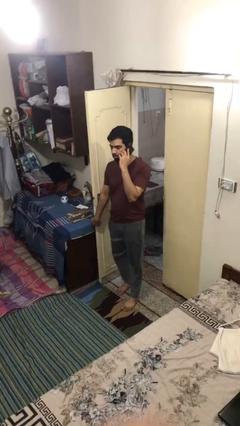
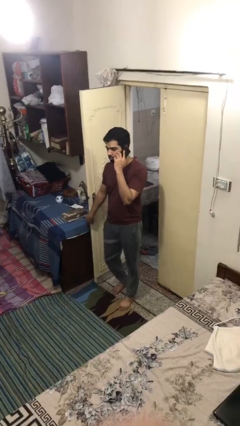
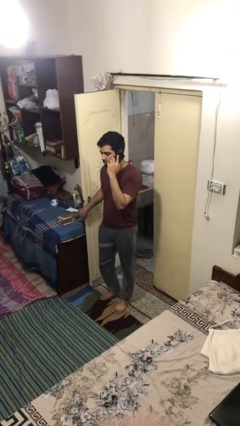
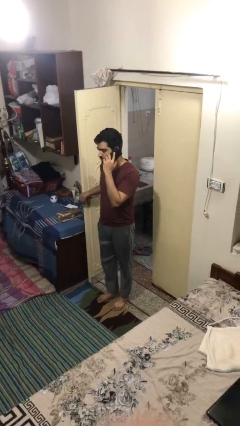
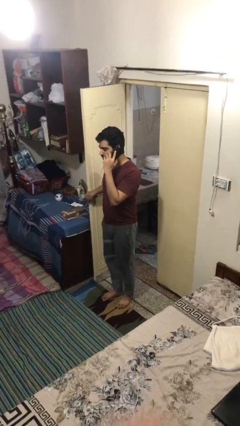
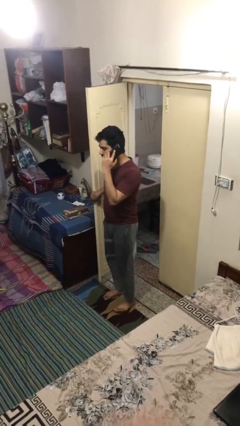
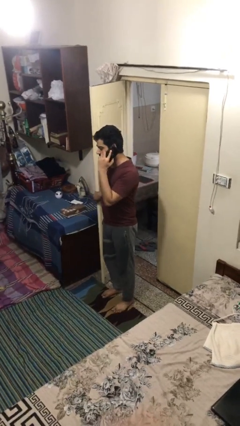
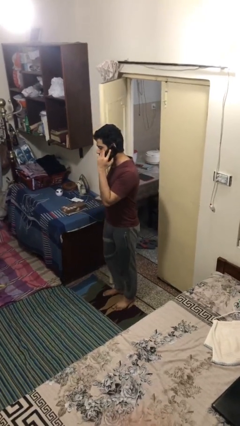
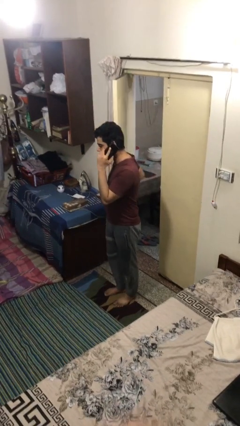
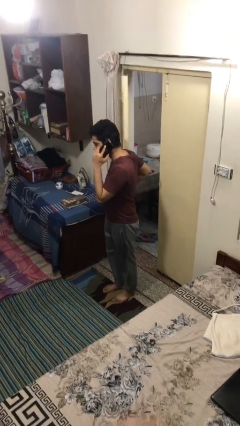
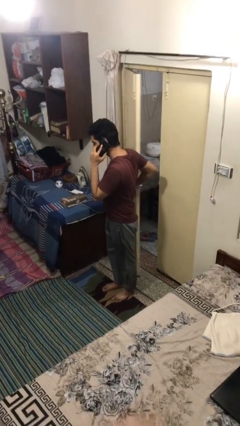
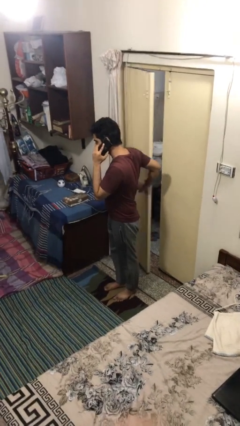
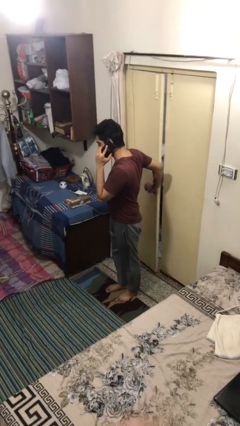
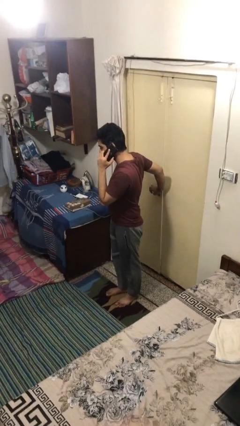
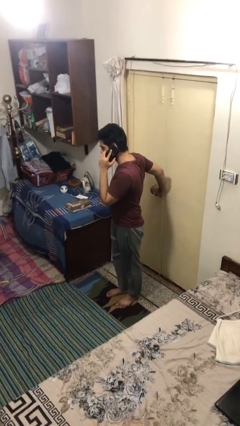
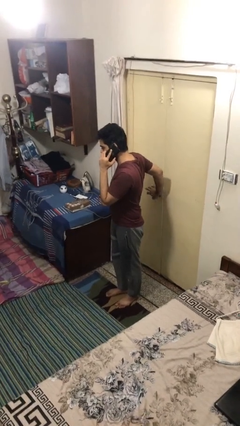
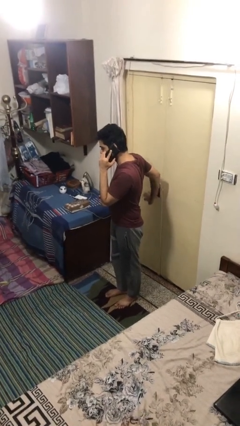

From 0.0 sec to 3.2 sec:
person closes facility door

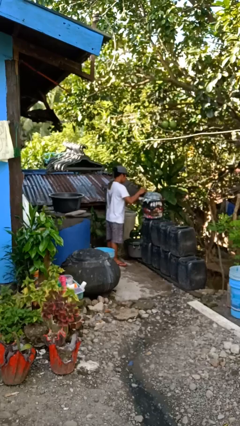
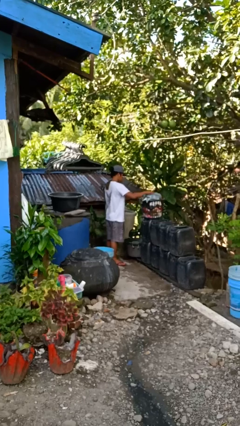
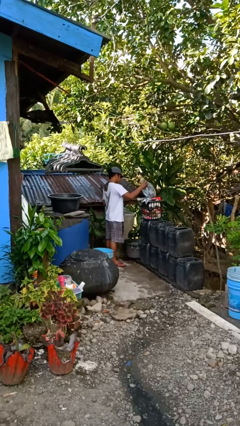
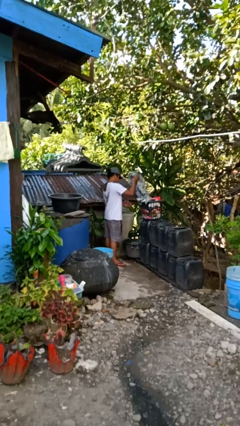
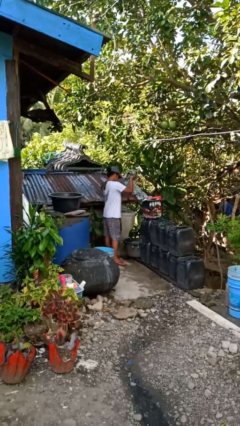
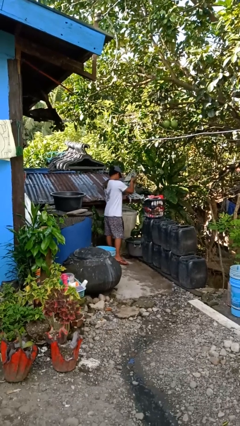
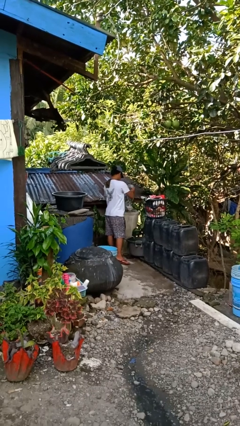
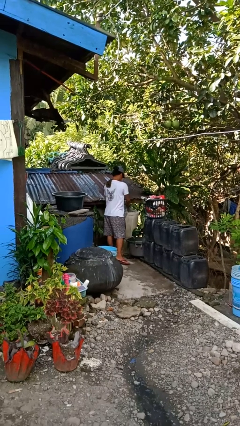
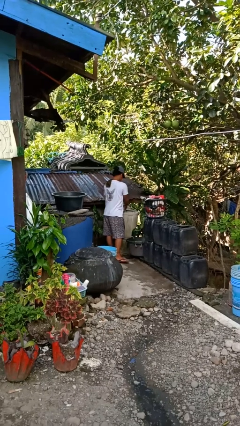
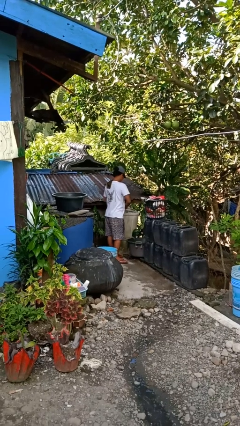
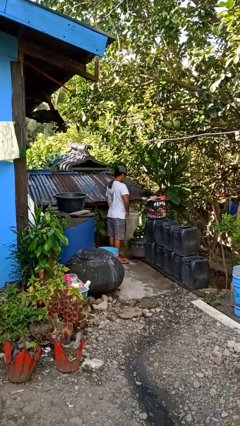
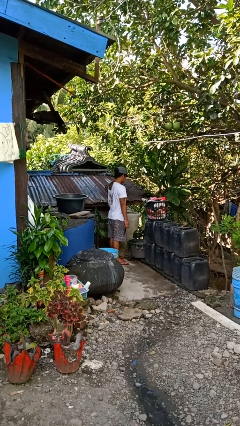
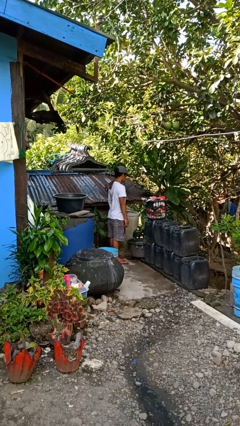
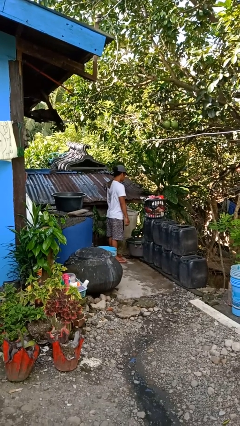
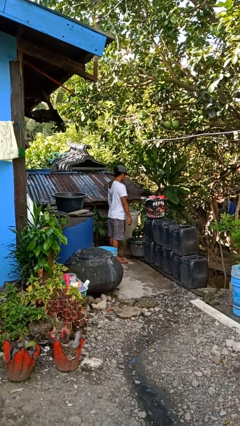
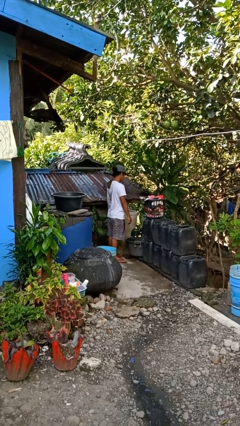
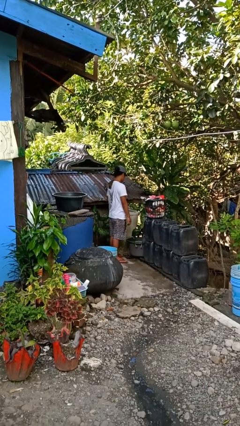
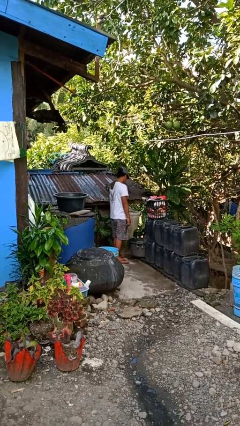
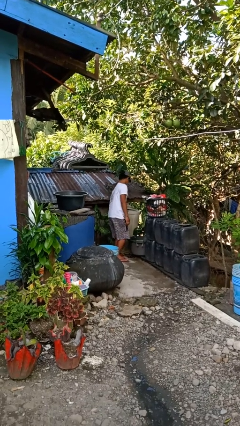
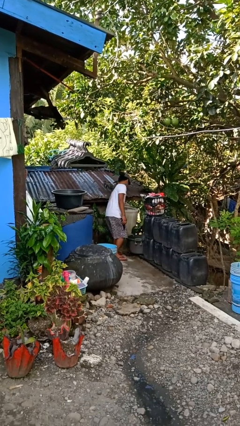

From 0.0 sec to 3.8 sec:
person loads dryer

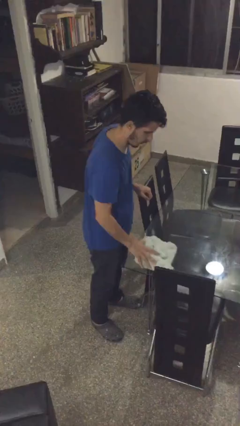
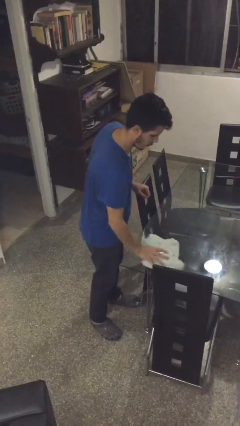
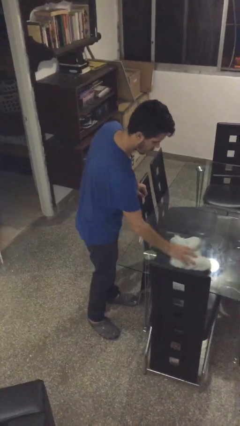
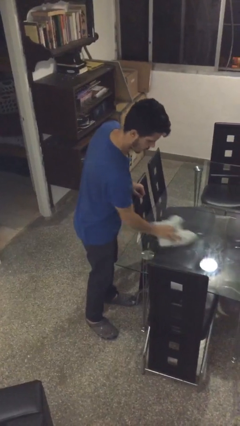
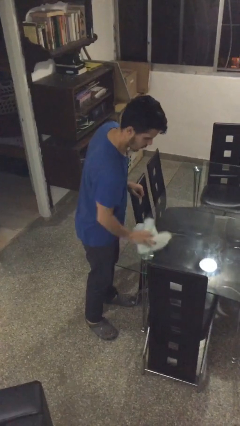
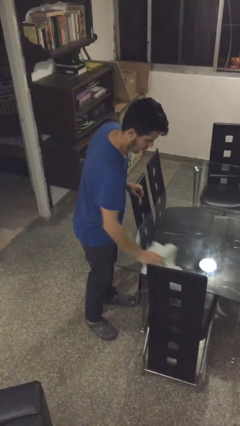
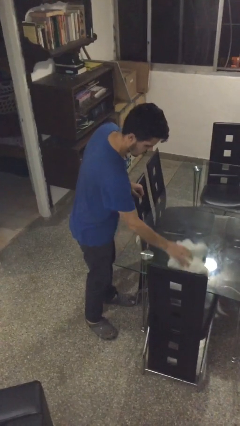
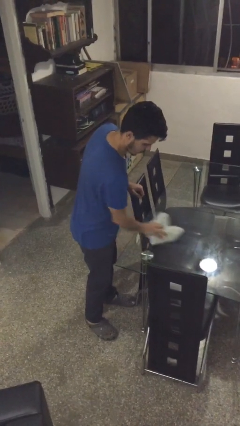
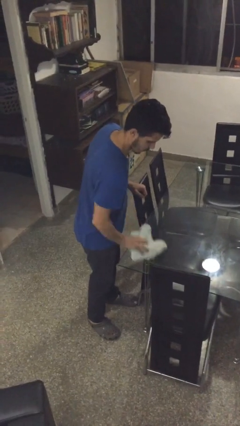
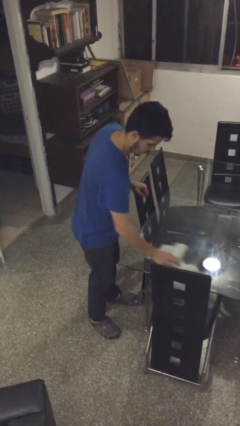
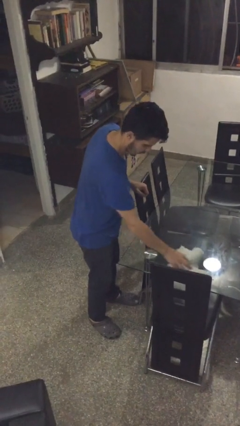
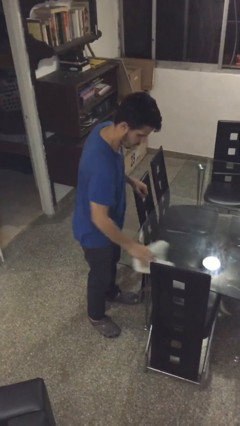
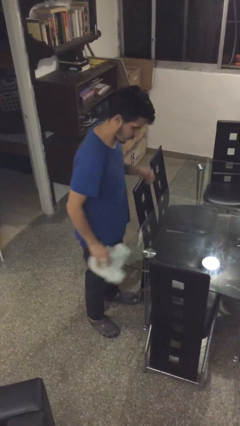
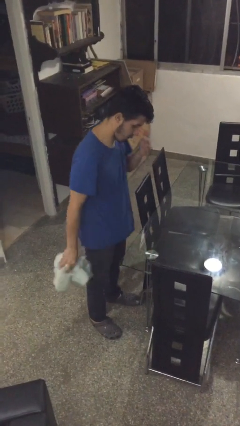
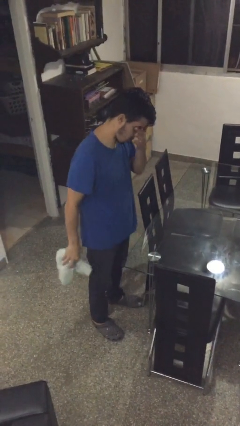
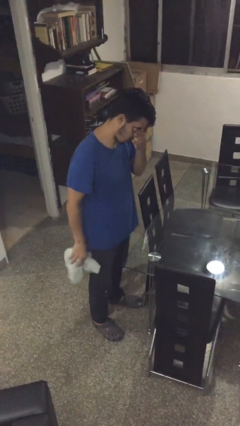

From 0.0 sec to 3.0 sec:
person cleans table with rag

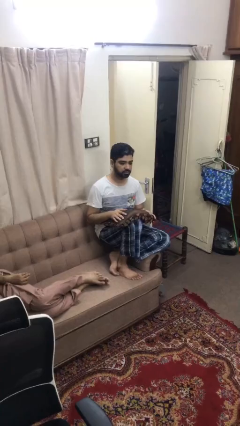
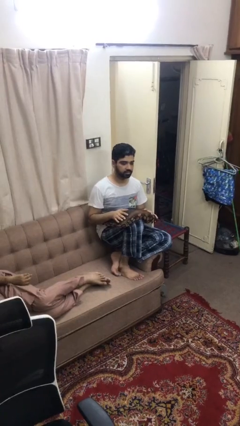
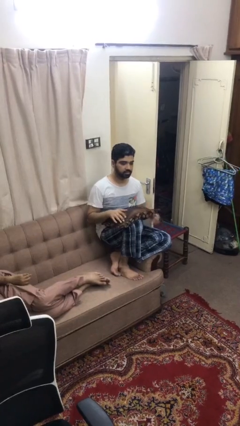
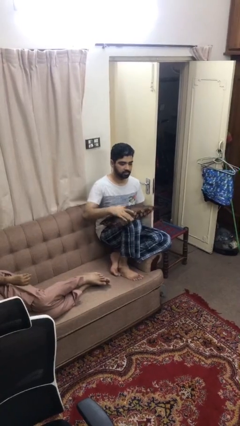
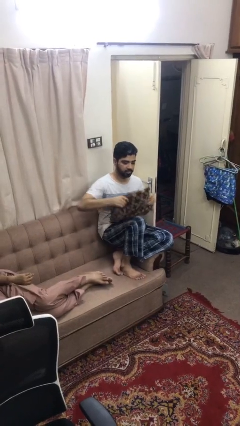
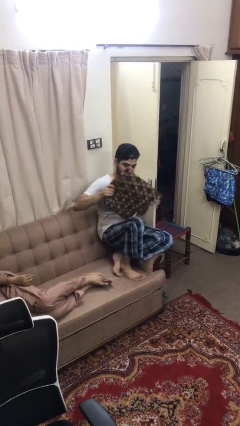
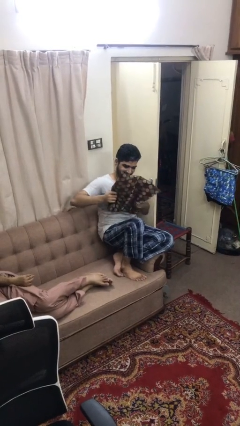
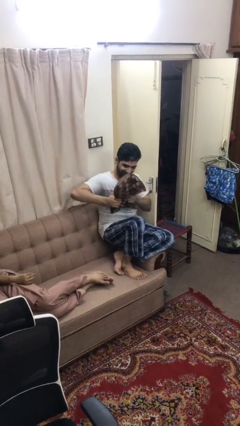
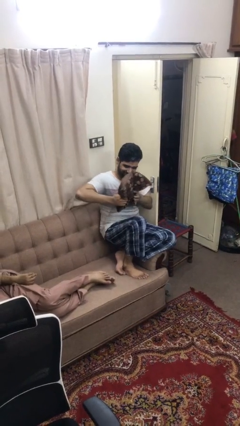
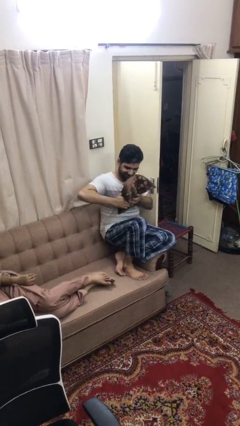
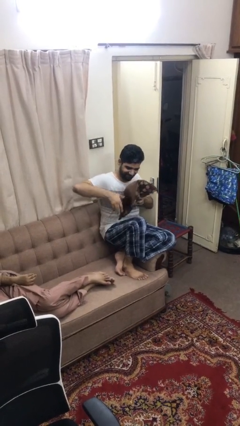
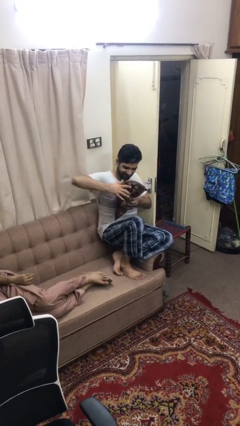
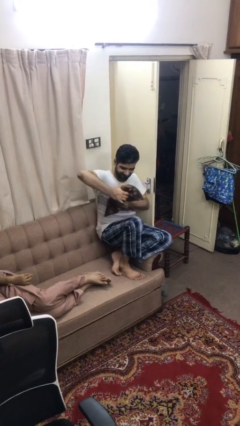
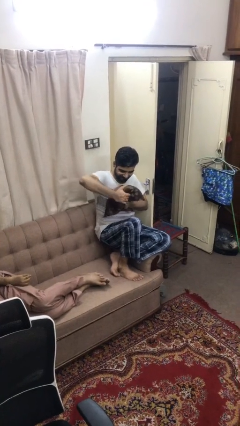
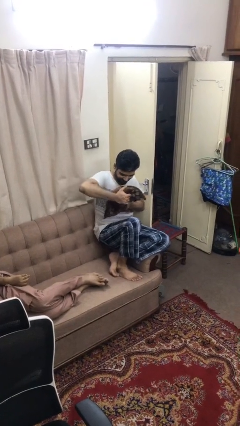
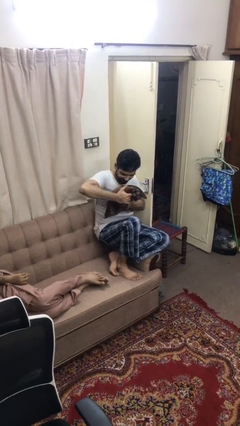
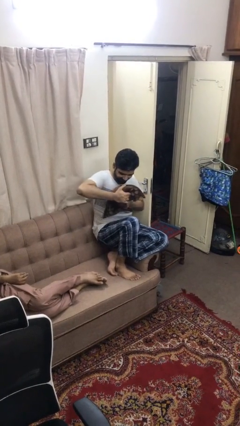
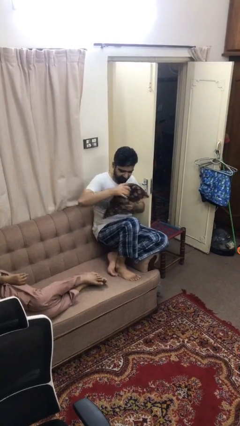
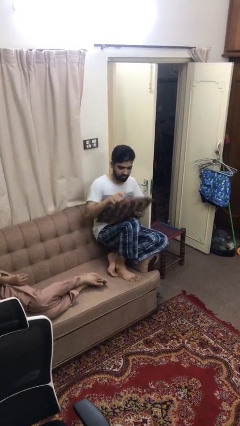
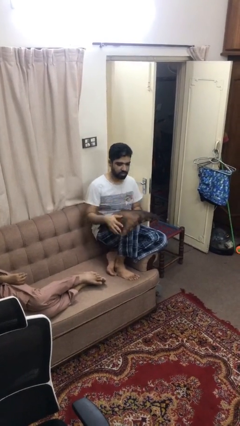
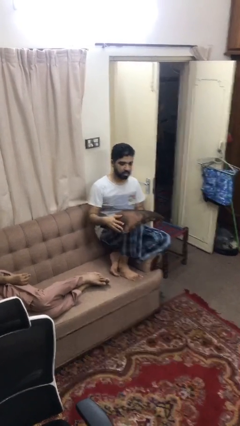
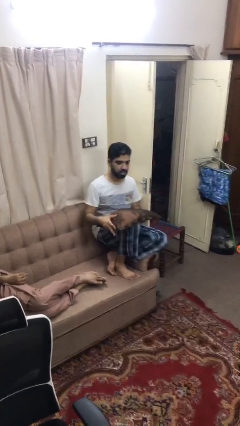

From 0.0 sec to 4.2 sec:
person squeezes object

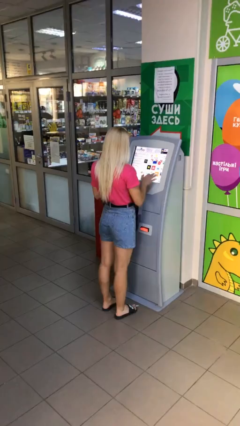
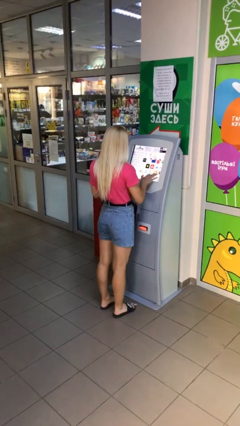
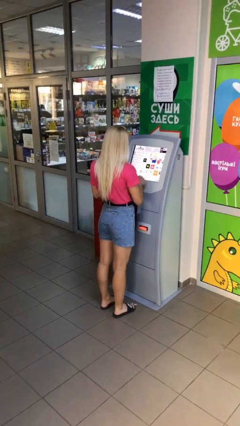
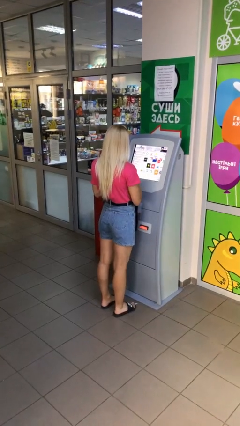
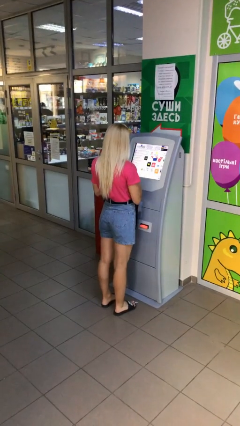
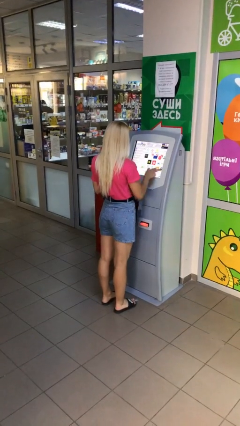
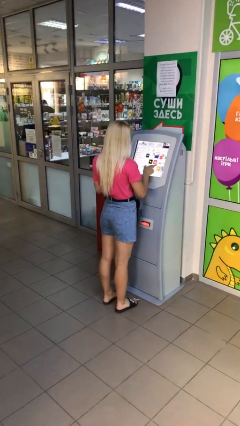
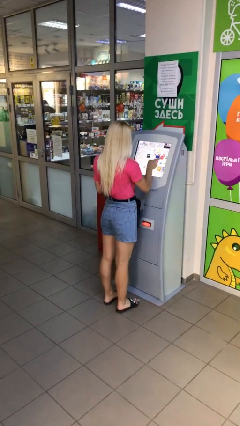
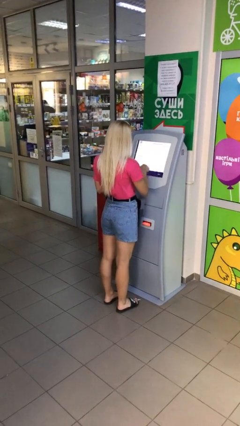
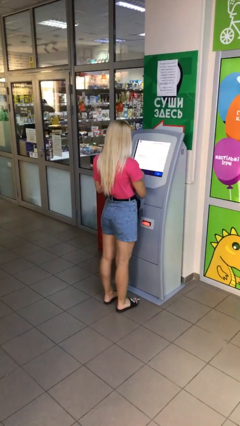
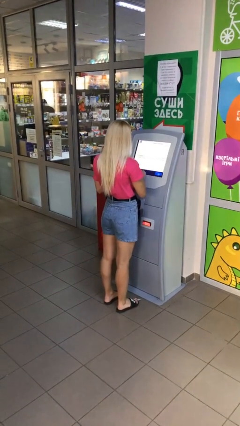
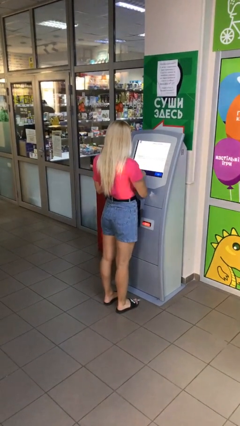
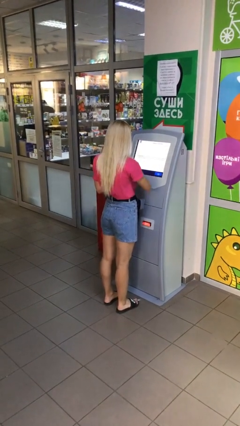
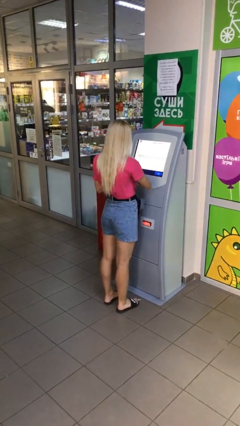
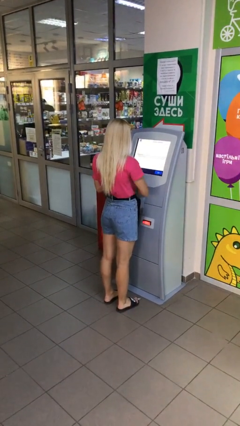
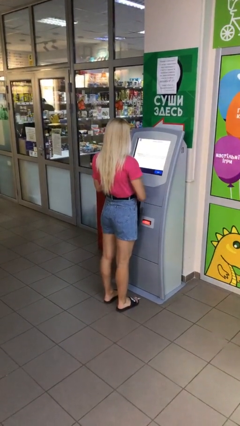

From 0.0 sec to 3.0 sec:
person purchases from machine
